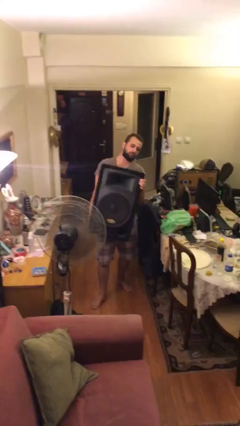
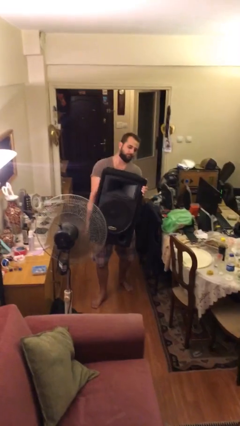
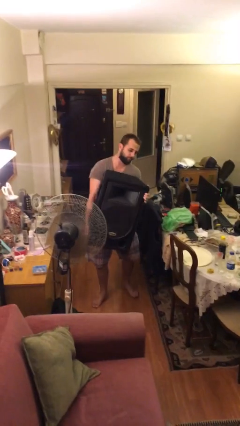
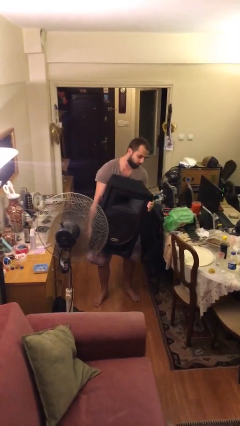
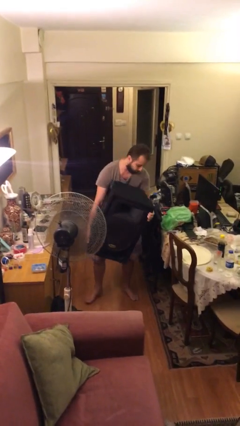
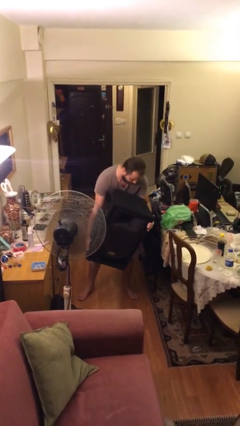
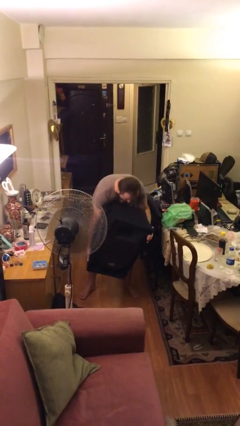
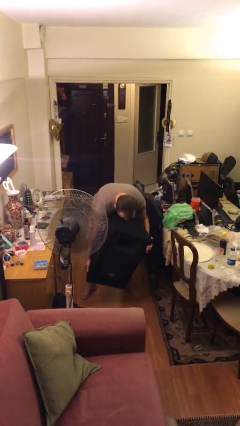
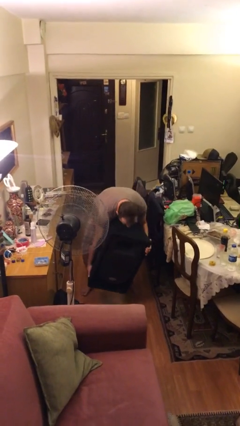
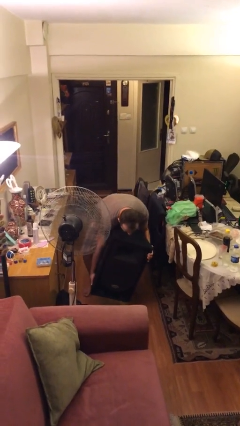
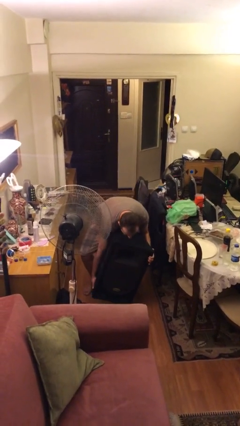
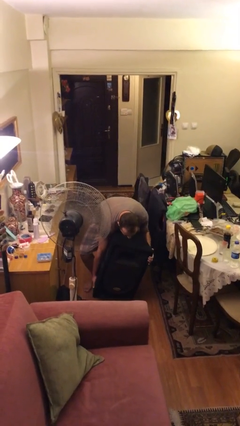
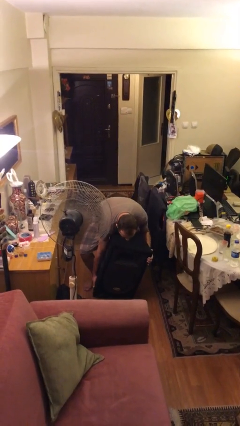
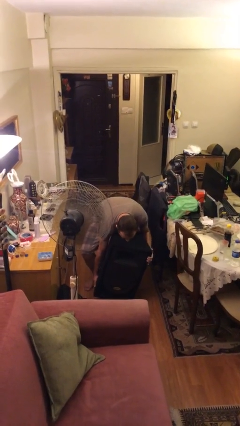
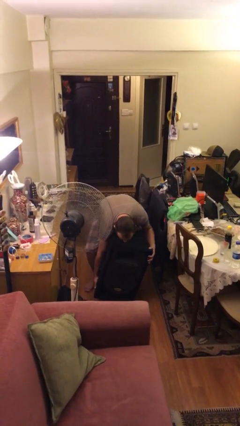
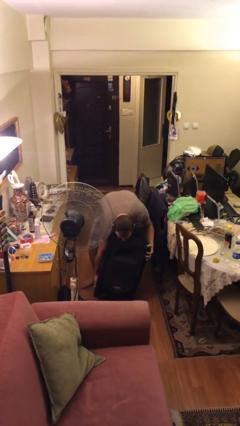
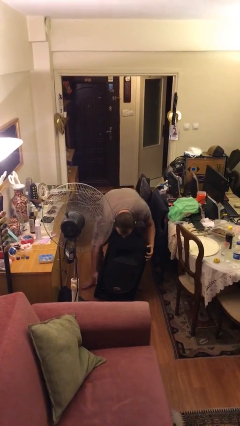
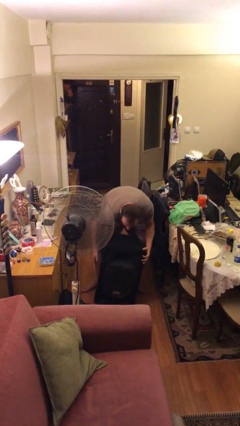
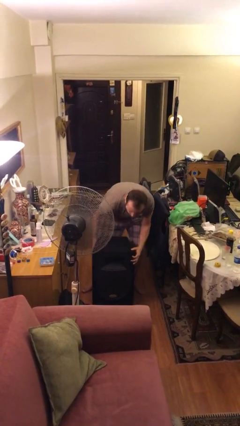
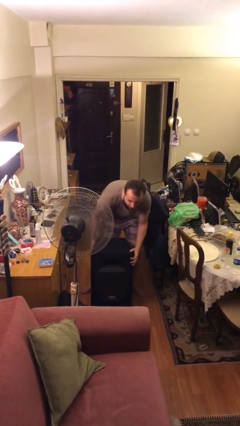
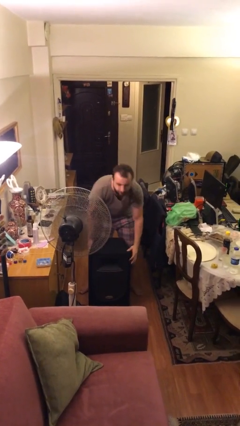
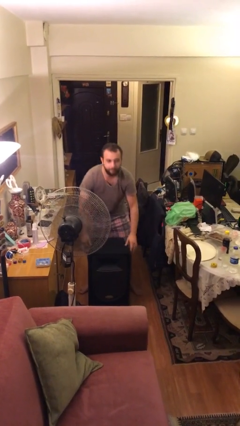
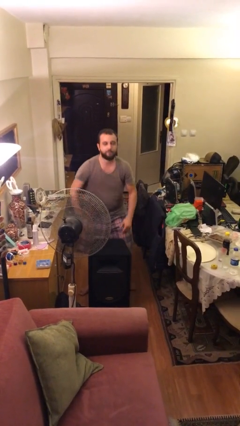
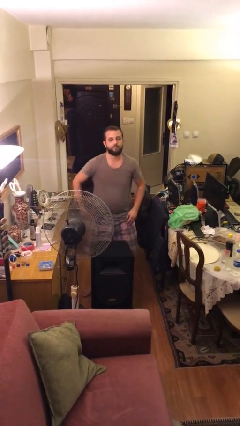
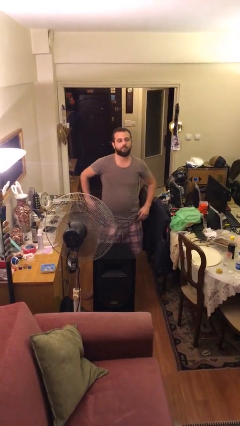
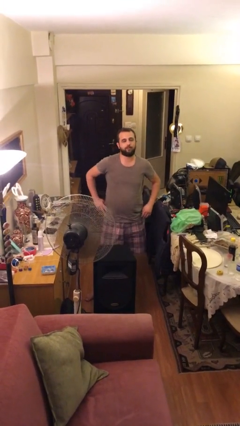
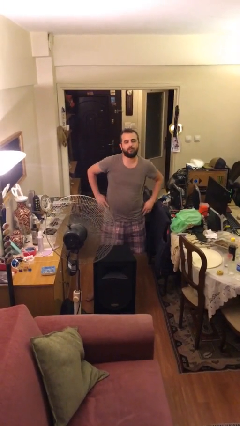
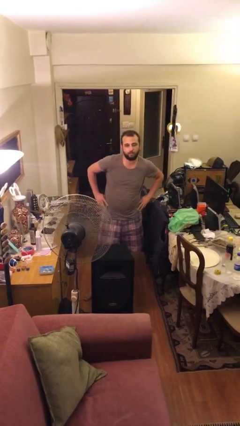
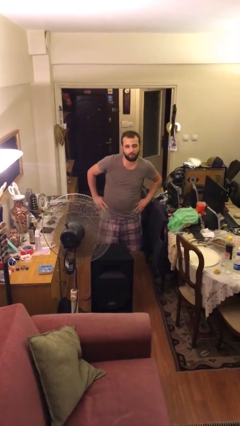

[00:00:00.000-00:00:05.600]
person puts down object on floor

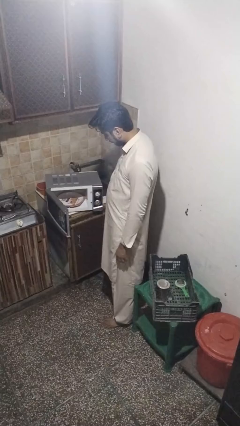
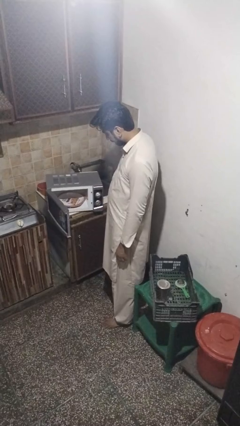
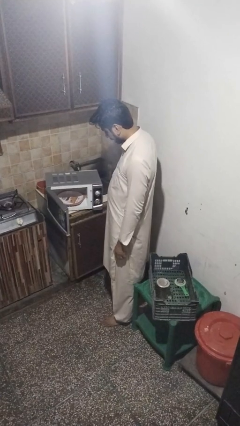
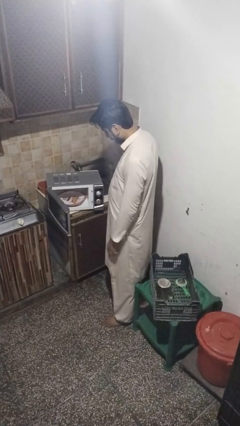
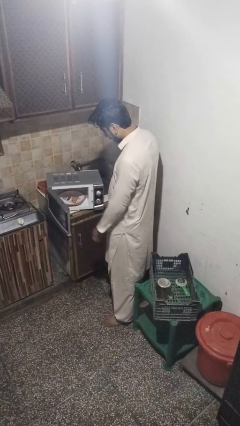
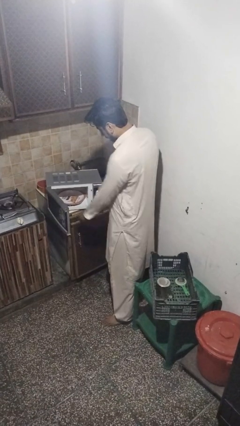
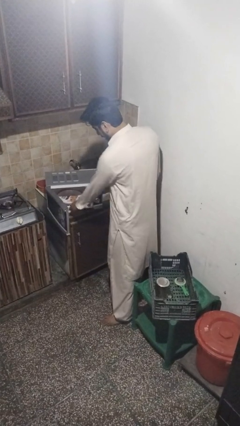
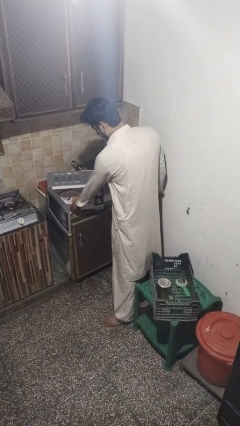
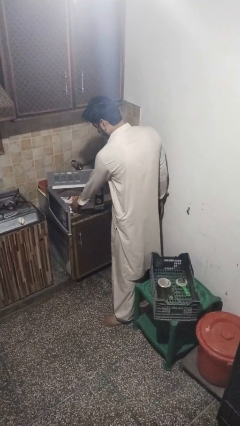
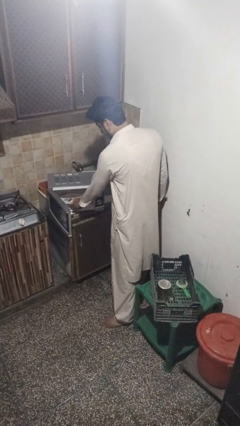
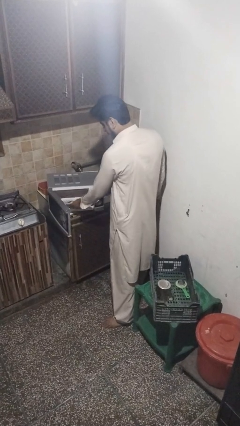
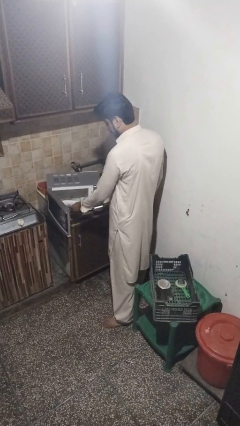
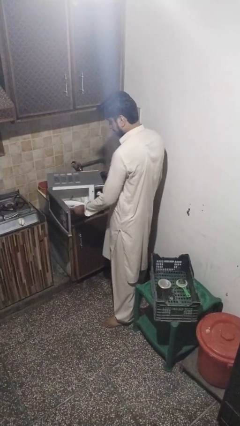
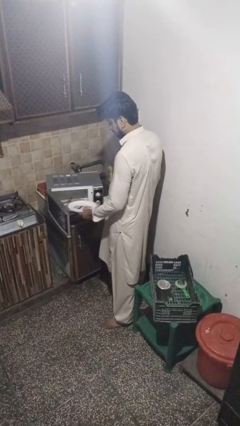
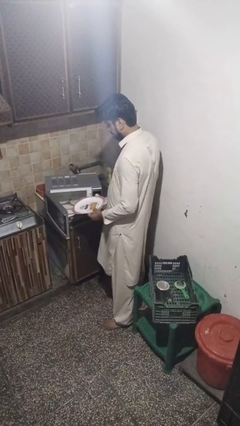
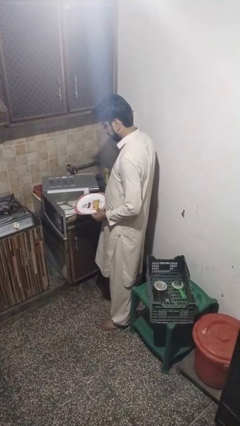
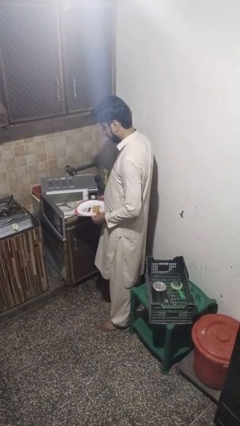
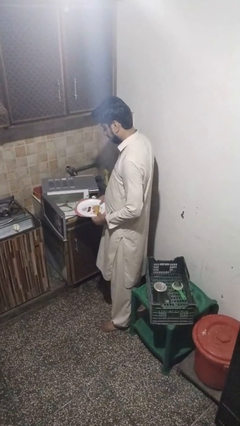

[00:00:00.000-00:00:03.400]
person takes object from microwave

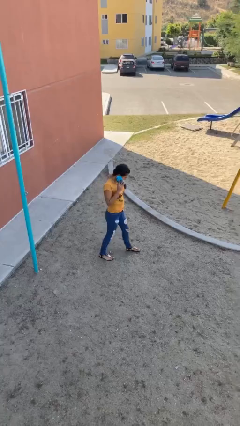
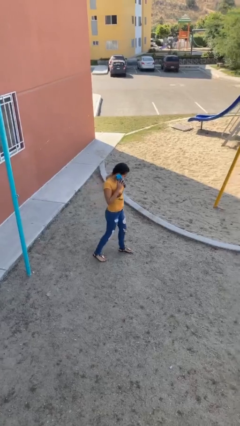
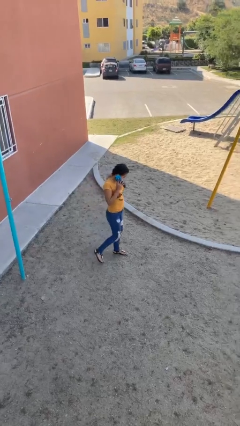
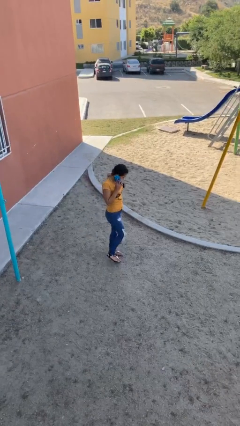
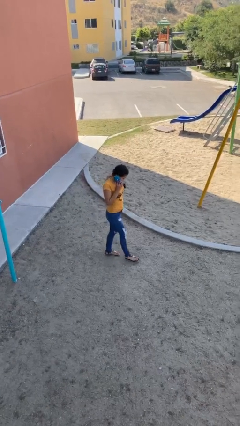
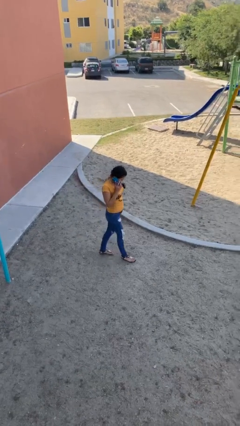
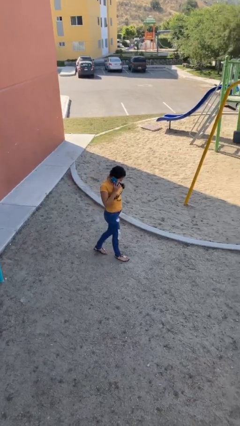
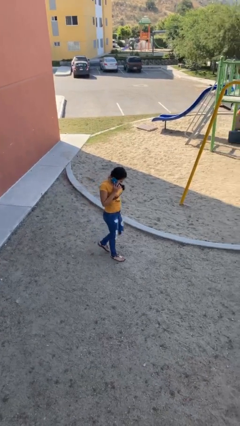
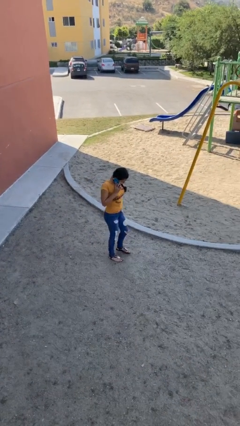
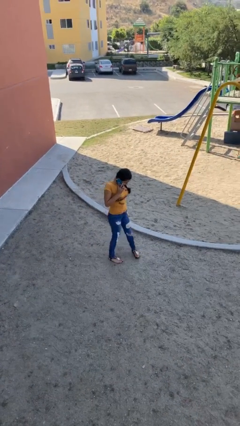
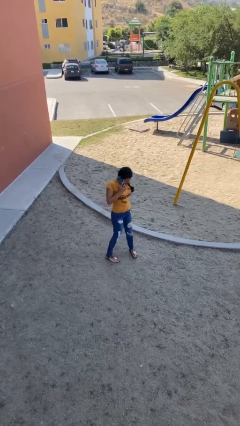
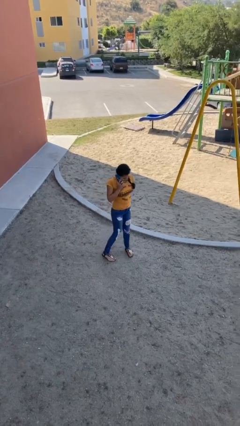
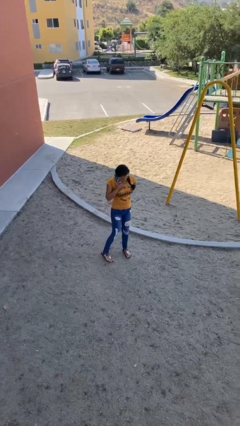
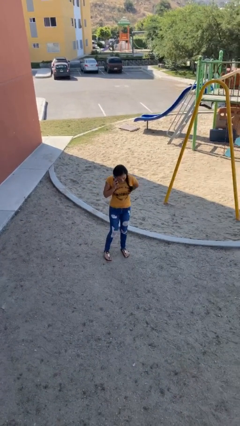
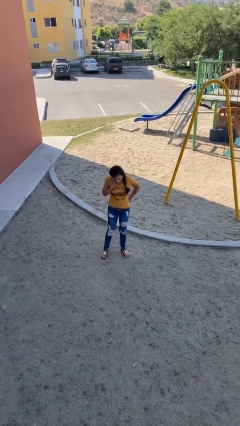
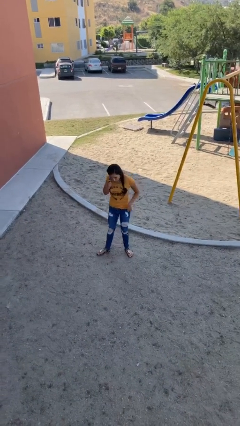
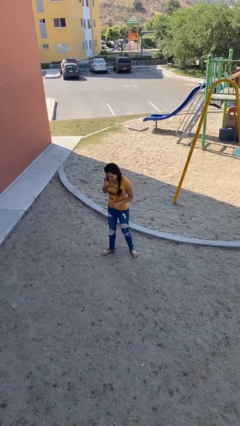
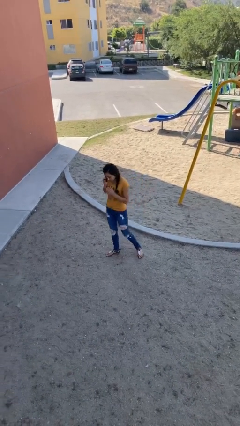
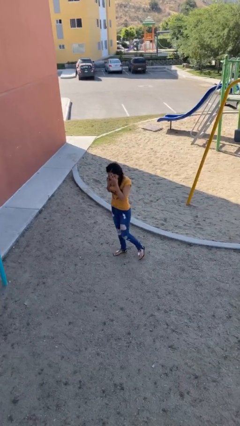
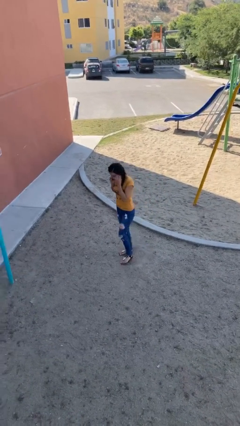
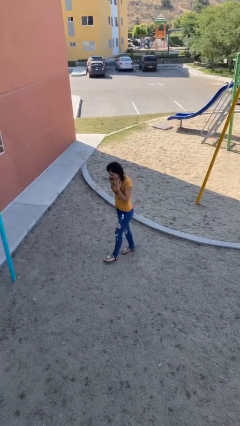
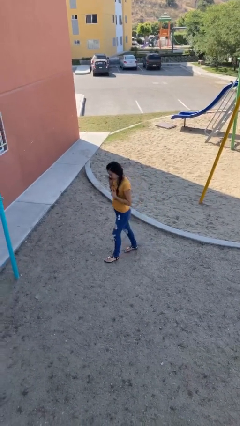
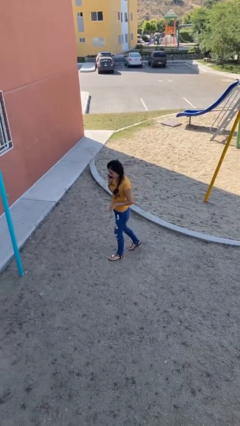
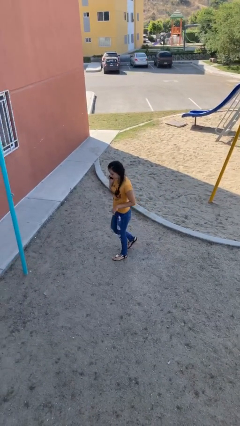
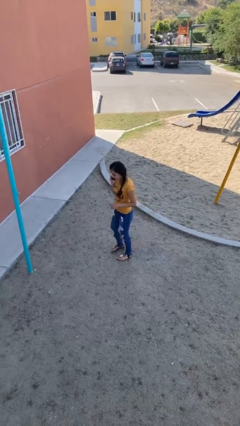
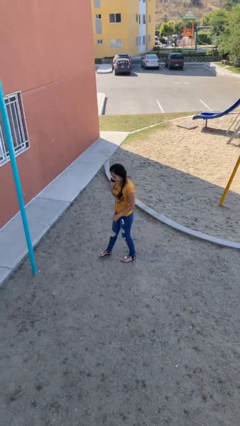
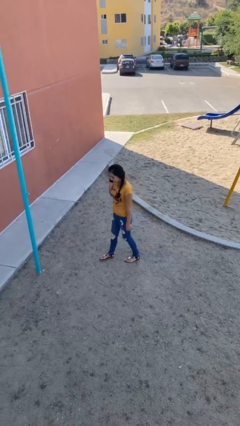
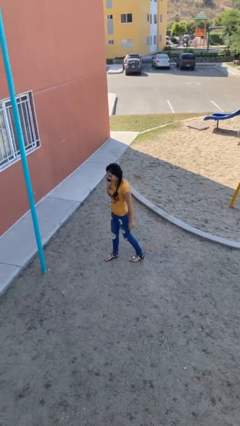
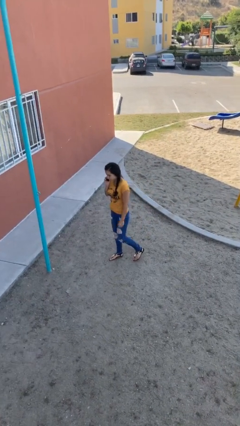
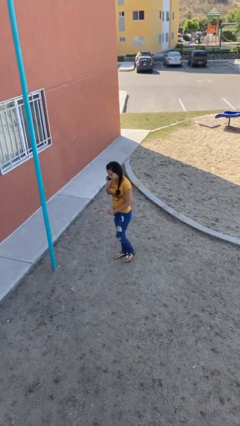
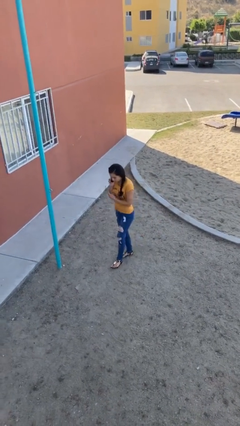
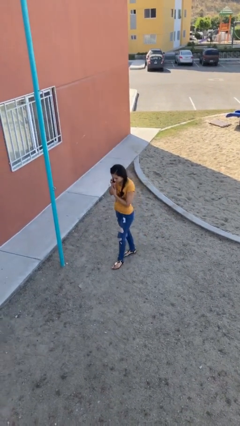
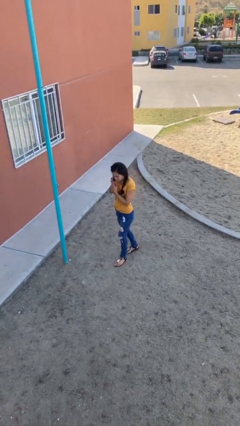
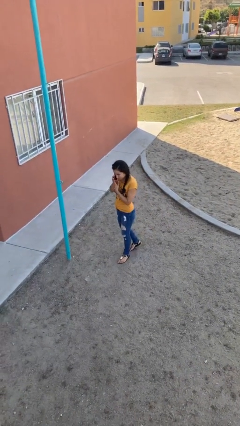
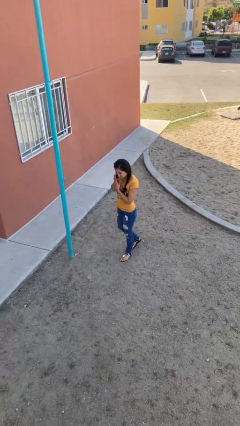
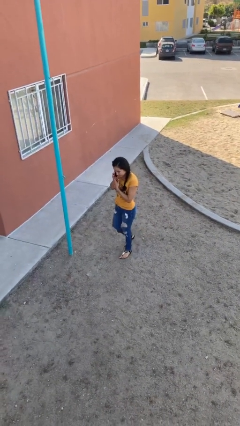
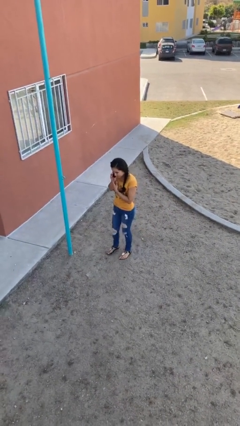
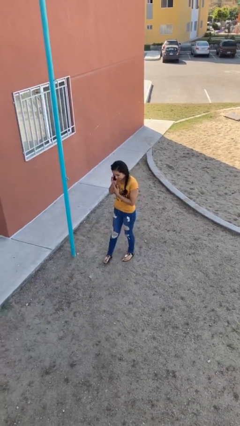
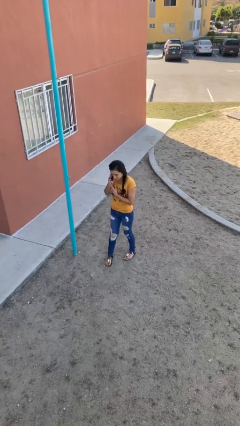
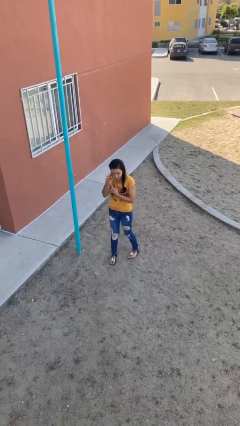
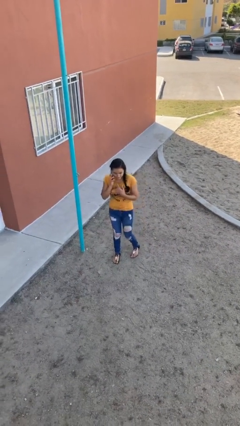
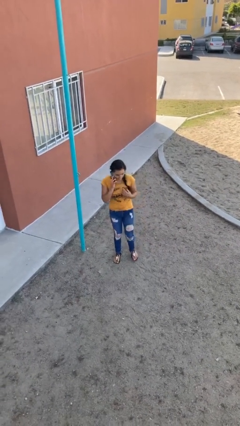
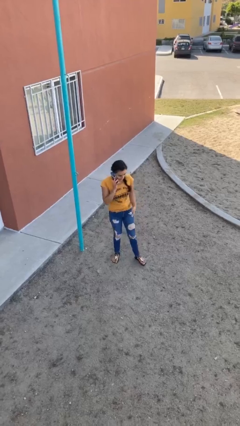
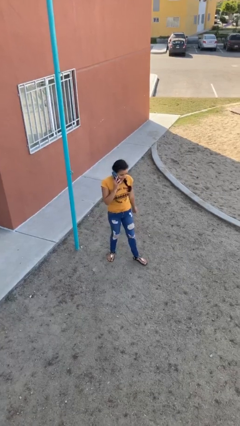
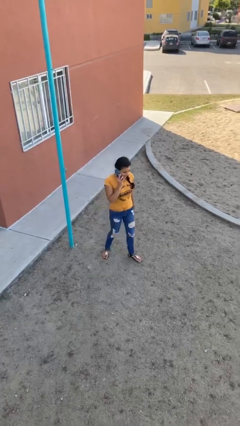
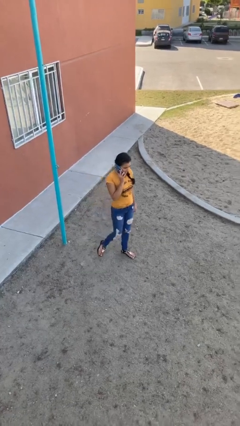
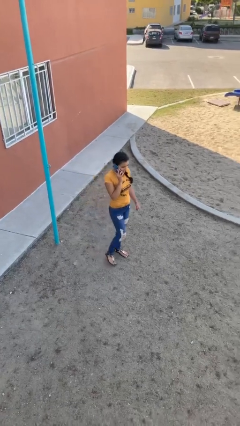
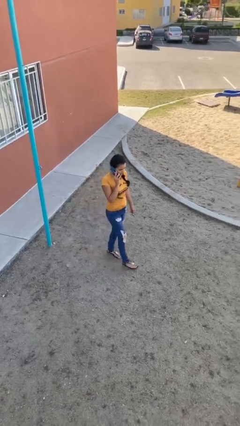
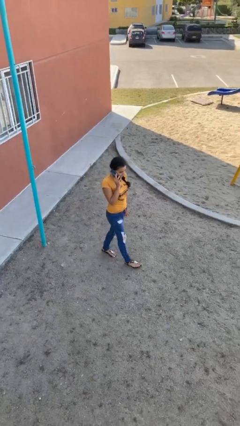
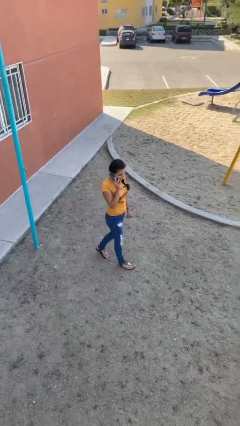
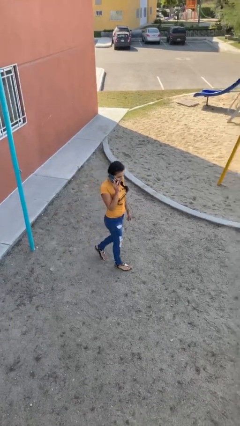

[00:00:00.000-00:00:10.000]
person talks on phone
